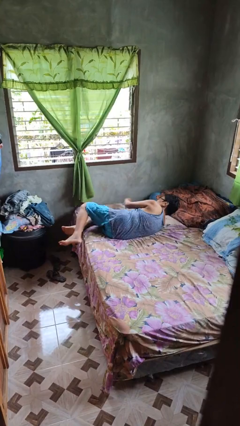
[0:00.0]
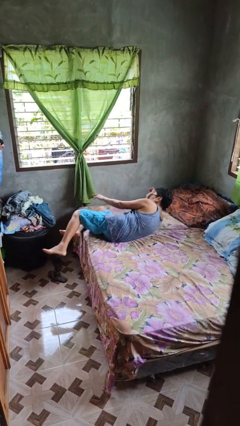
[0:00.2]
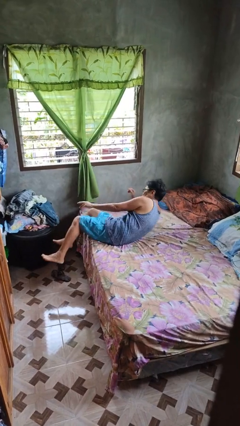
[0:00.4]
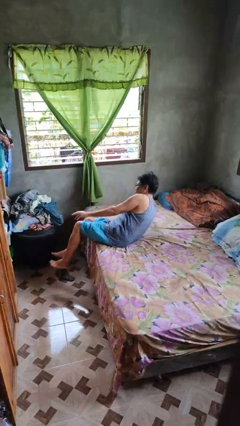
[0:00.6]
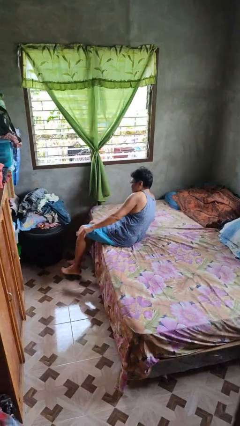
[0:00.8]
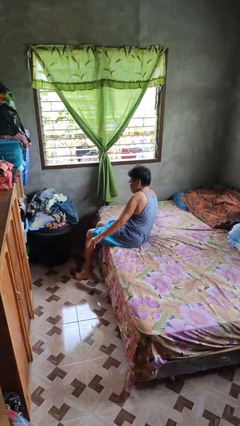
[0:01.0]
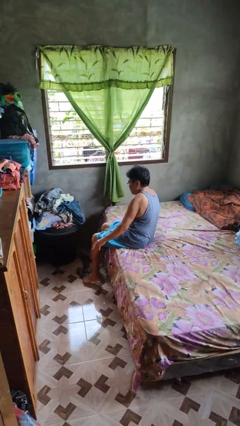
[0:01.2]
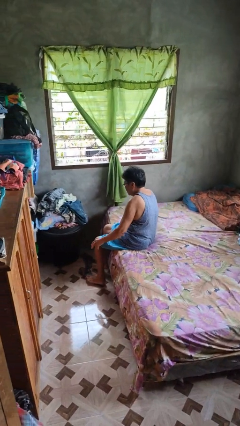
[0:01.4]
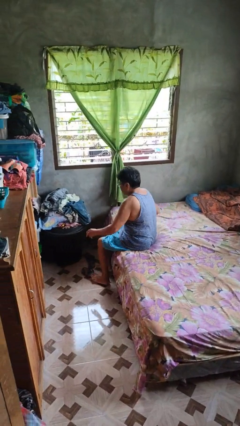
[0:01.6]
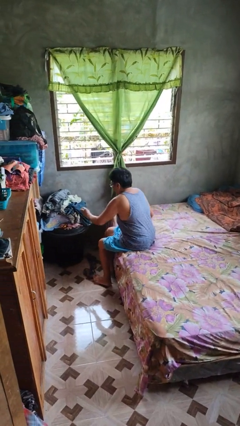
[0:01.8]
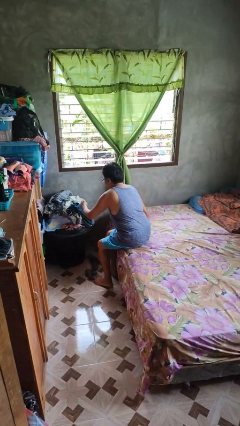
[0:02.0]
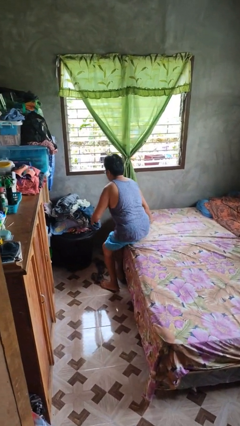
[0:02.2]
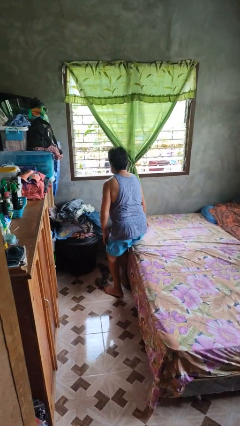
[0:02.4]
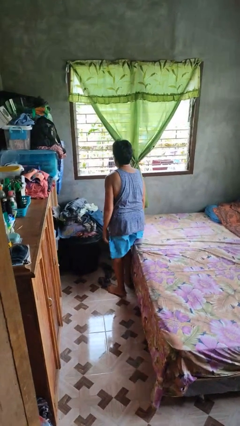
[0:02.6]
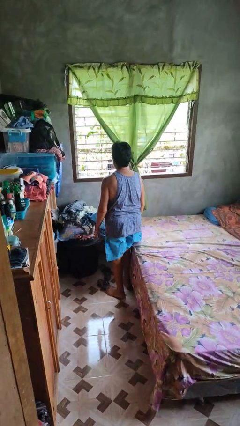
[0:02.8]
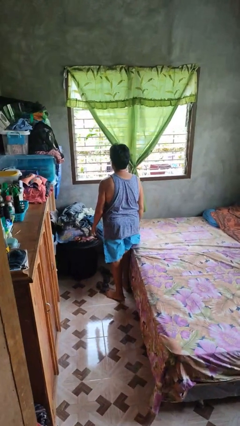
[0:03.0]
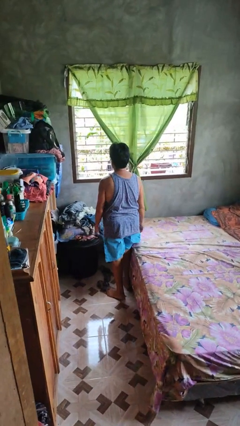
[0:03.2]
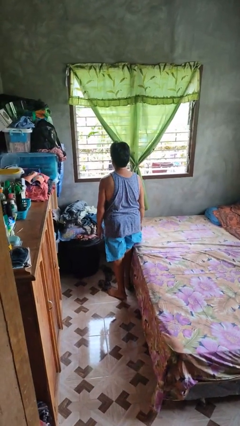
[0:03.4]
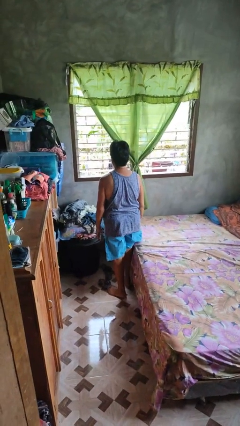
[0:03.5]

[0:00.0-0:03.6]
person stands up

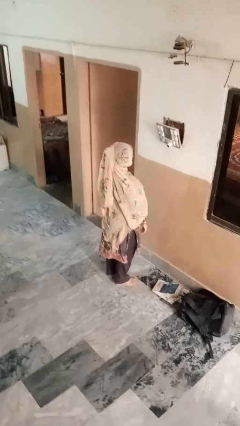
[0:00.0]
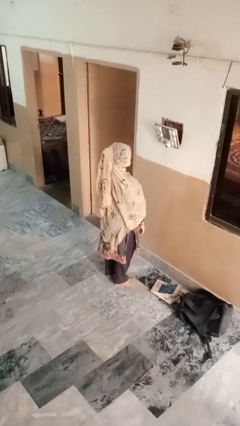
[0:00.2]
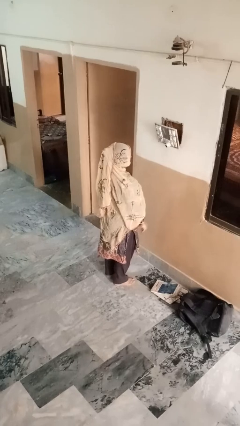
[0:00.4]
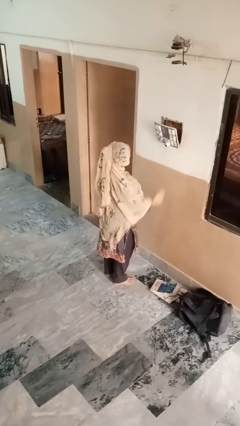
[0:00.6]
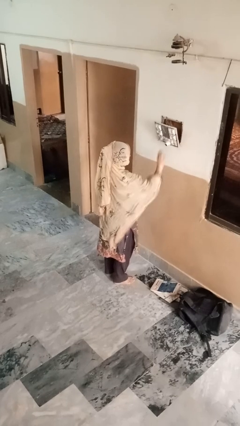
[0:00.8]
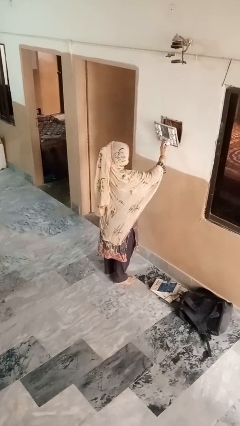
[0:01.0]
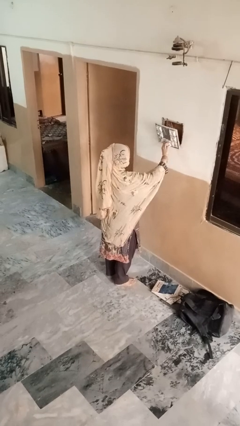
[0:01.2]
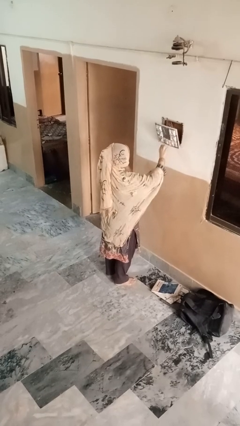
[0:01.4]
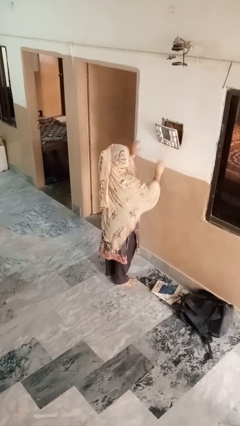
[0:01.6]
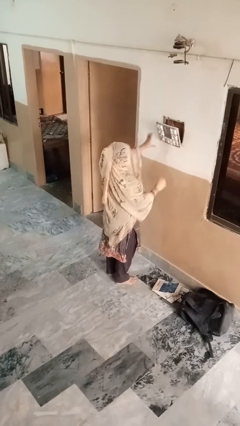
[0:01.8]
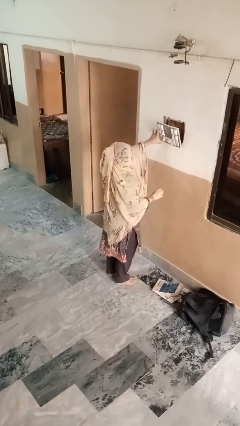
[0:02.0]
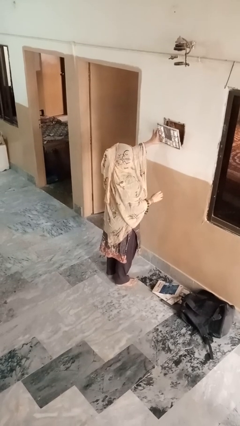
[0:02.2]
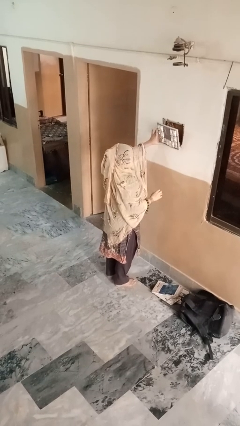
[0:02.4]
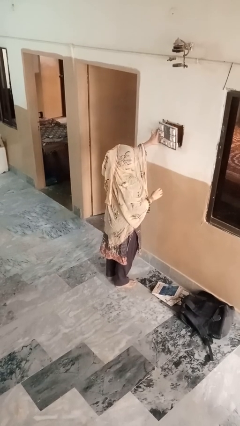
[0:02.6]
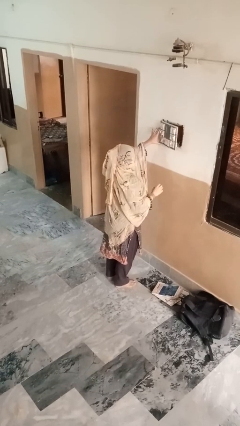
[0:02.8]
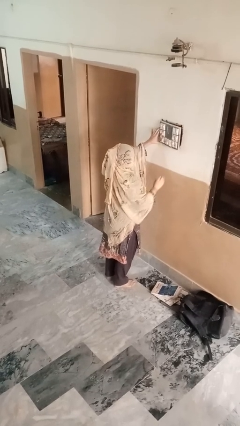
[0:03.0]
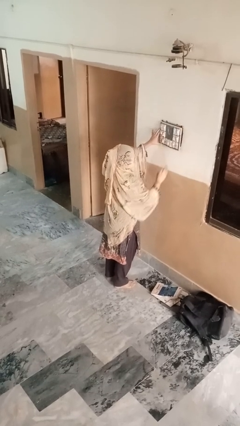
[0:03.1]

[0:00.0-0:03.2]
person unplugs from electrical socket

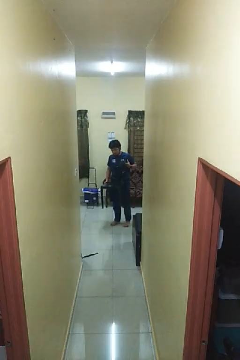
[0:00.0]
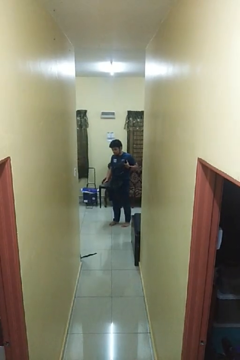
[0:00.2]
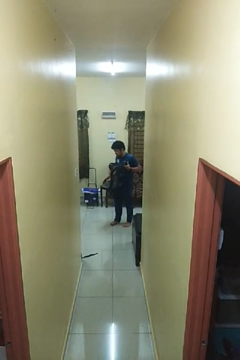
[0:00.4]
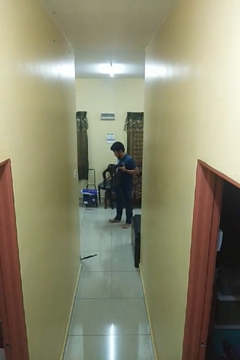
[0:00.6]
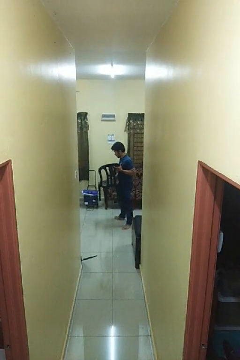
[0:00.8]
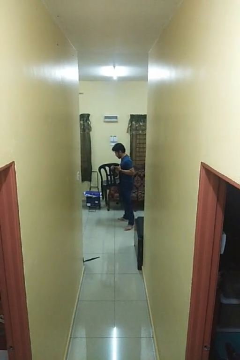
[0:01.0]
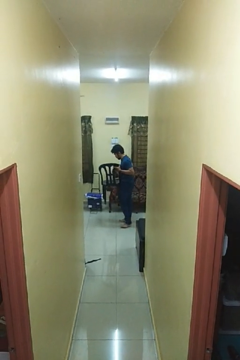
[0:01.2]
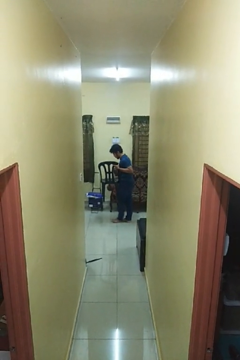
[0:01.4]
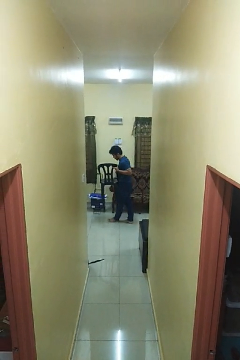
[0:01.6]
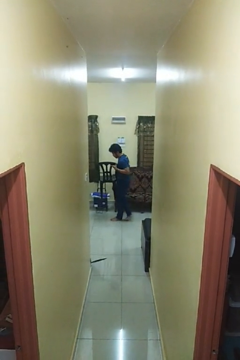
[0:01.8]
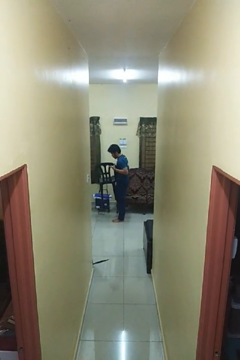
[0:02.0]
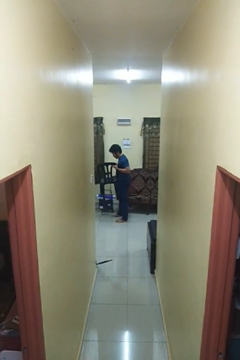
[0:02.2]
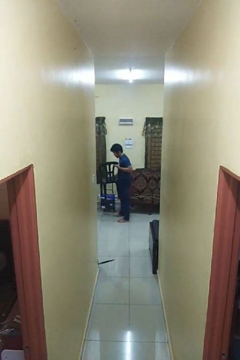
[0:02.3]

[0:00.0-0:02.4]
person carries furniture

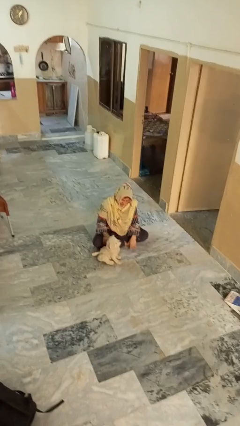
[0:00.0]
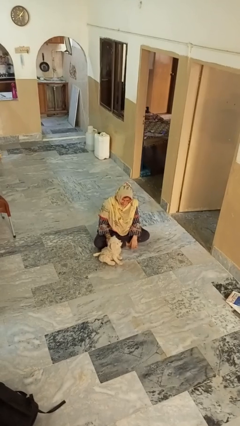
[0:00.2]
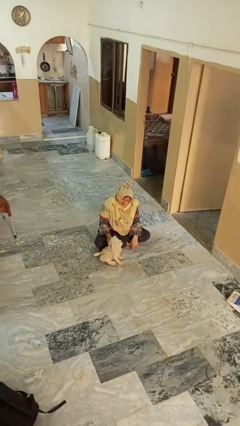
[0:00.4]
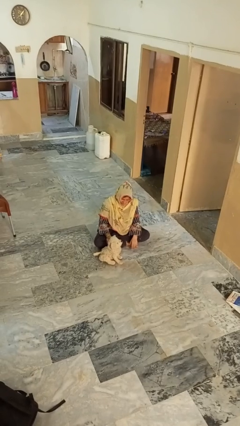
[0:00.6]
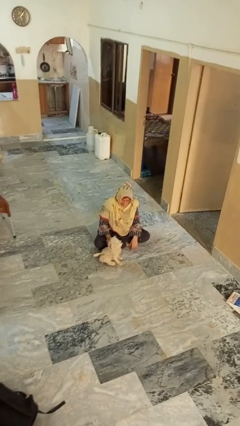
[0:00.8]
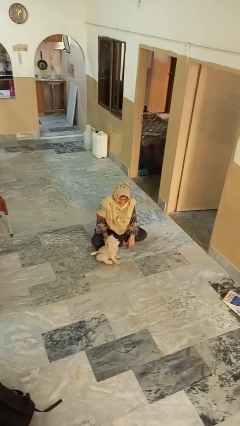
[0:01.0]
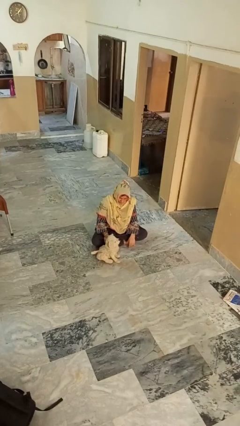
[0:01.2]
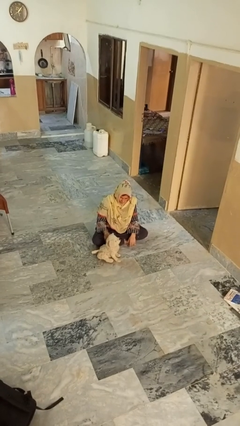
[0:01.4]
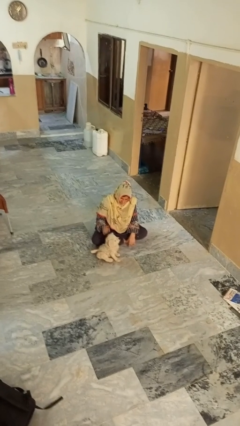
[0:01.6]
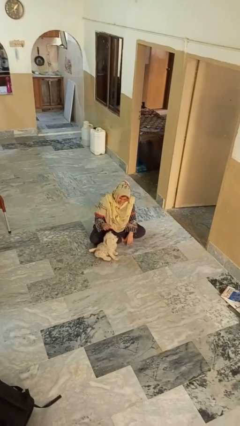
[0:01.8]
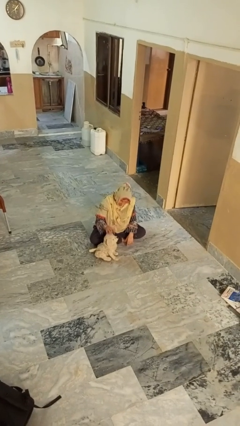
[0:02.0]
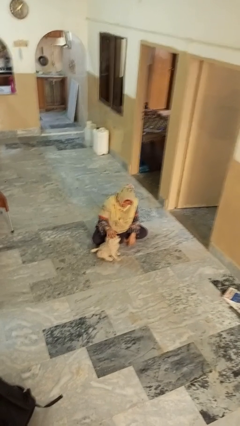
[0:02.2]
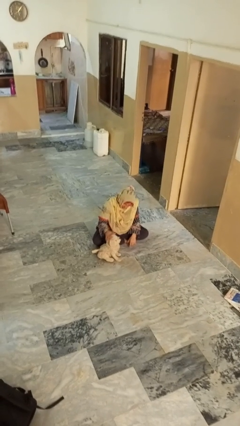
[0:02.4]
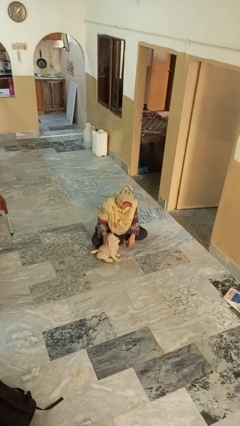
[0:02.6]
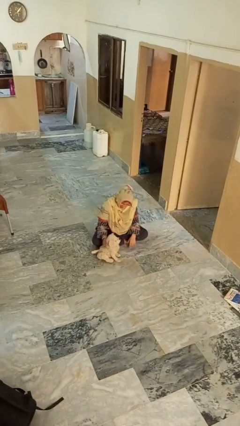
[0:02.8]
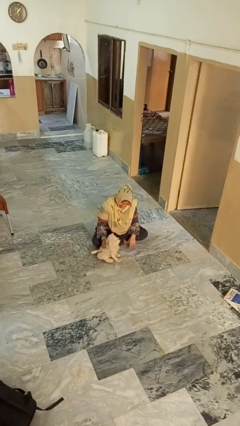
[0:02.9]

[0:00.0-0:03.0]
person pets dog

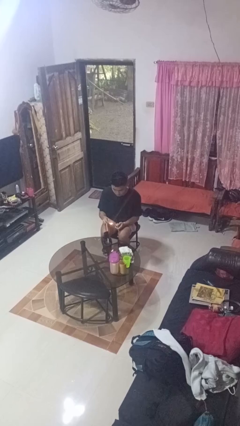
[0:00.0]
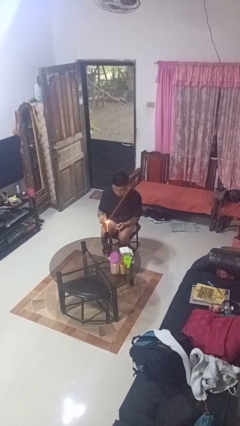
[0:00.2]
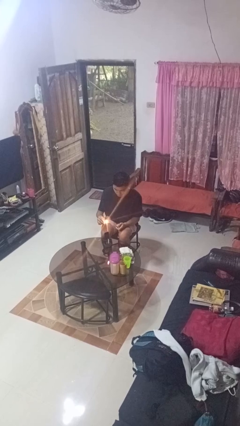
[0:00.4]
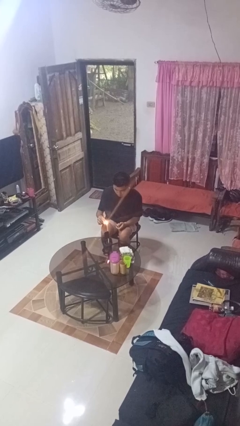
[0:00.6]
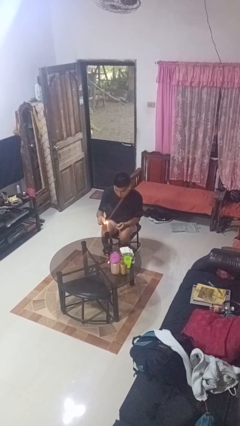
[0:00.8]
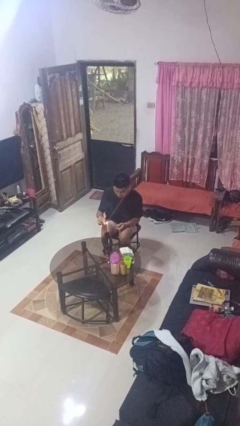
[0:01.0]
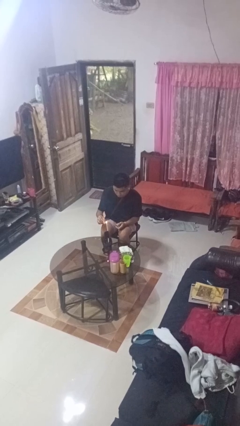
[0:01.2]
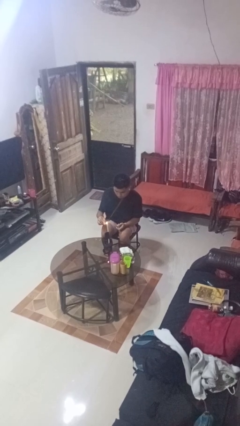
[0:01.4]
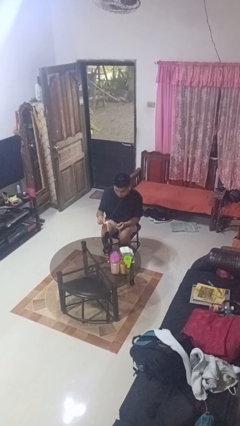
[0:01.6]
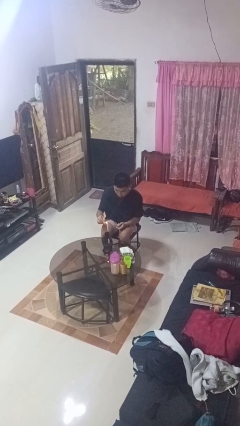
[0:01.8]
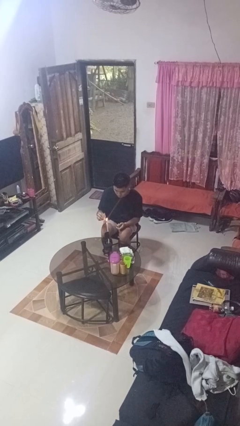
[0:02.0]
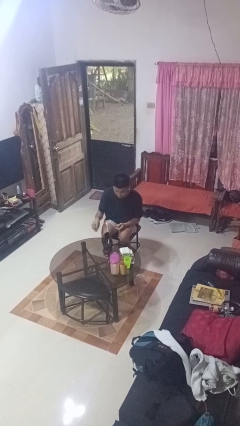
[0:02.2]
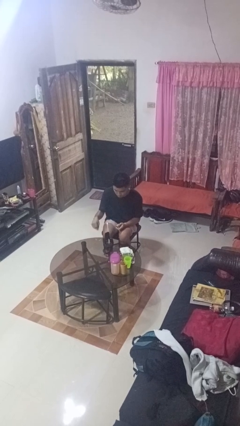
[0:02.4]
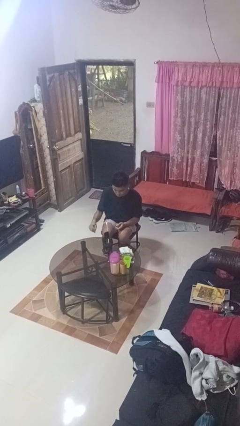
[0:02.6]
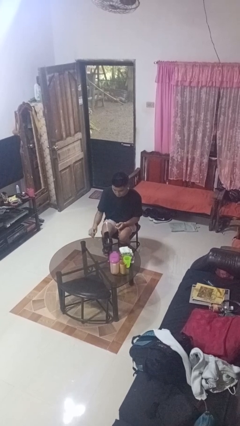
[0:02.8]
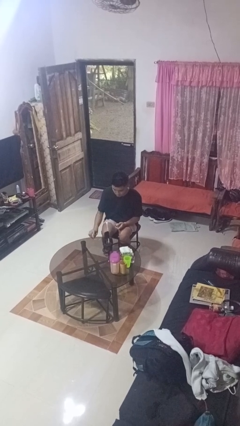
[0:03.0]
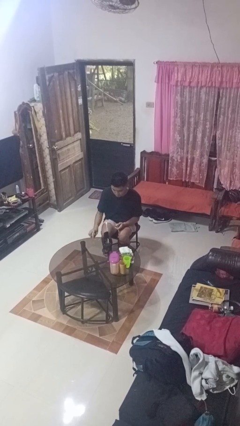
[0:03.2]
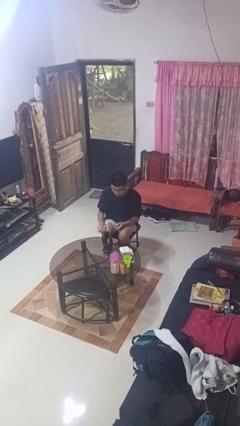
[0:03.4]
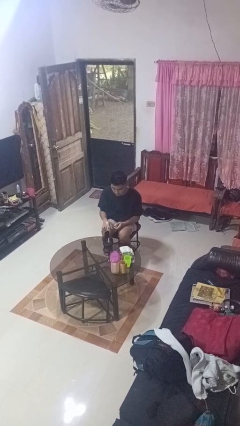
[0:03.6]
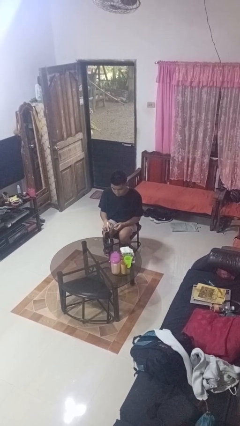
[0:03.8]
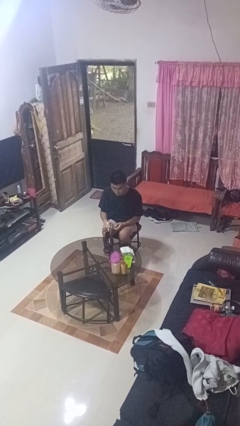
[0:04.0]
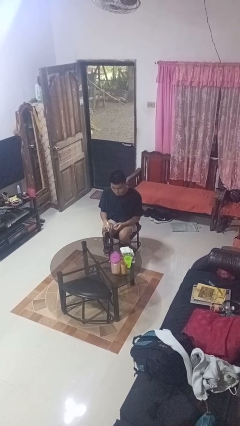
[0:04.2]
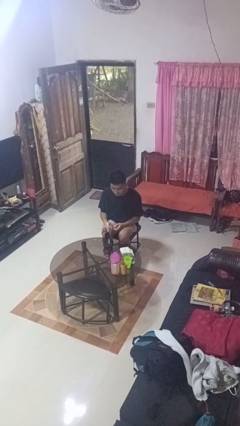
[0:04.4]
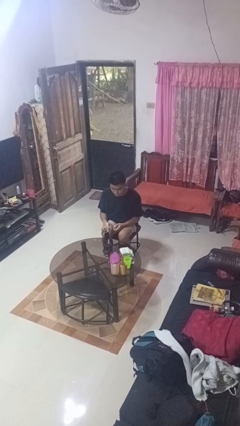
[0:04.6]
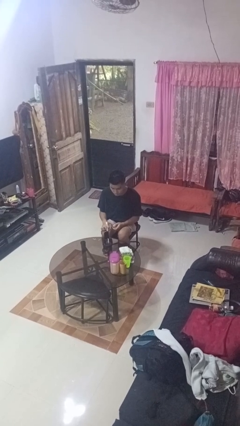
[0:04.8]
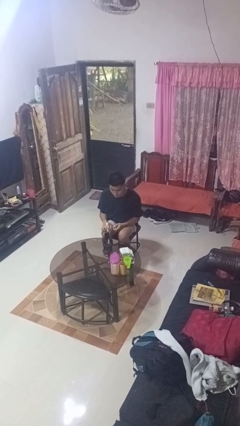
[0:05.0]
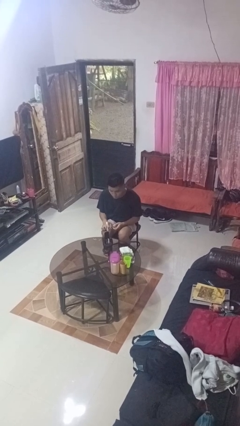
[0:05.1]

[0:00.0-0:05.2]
person lights candle
